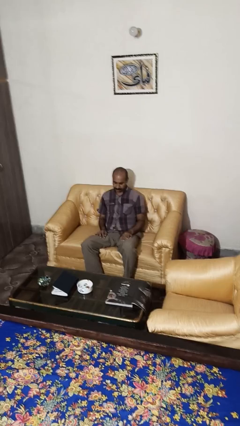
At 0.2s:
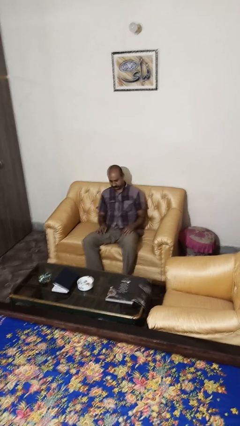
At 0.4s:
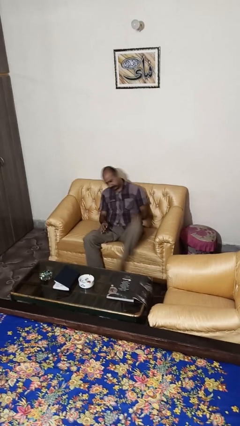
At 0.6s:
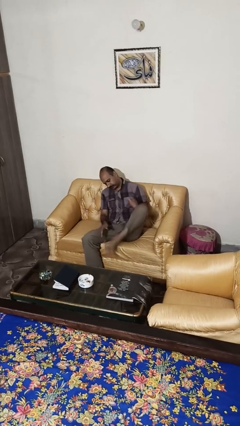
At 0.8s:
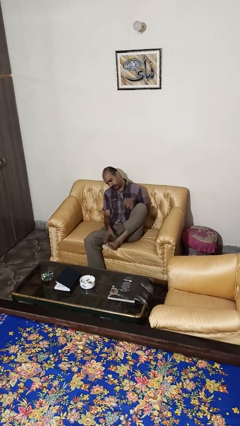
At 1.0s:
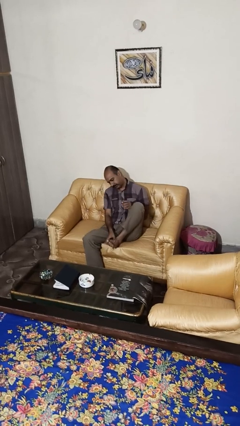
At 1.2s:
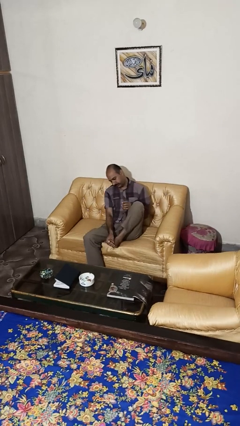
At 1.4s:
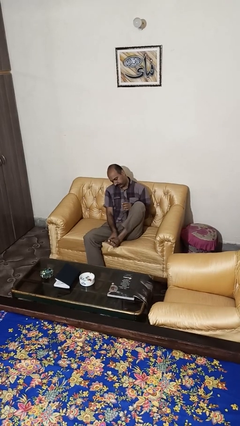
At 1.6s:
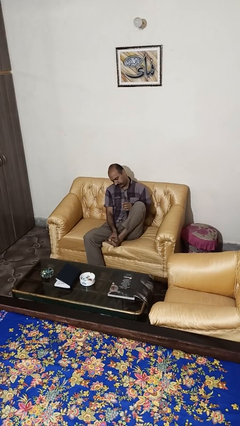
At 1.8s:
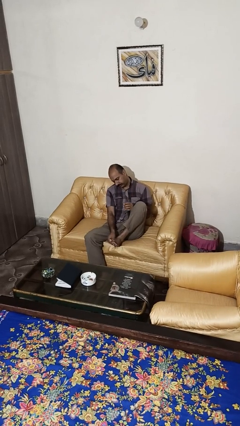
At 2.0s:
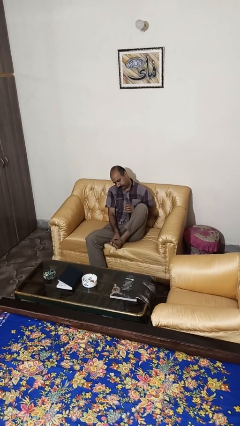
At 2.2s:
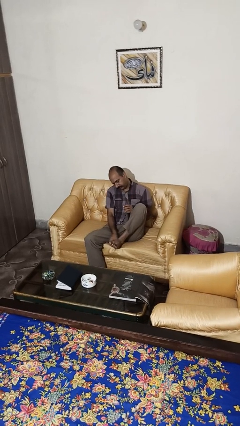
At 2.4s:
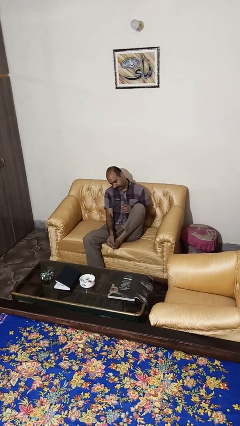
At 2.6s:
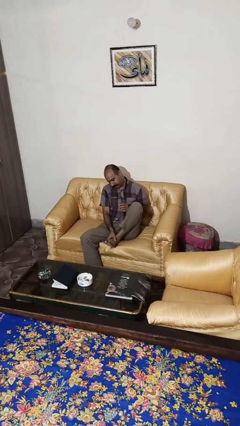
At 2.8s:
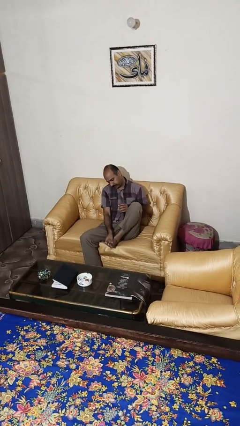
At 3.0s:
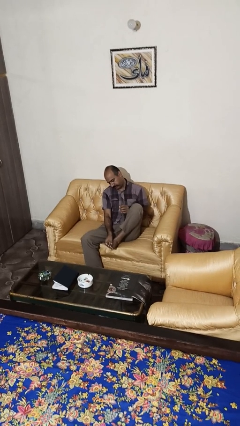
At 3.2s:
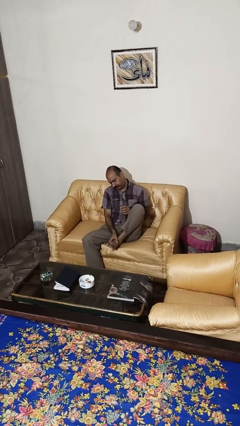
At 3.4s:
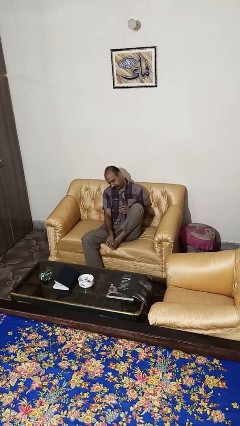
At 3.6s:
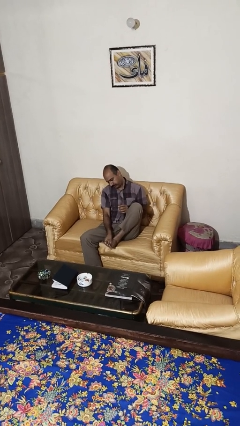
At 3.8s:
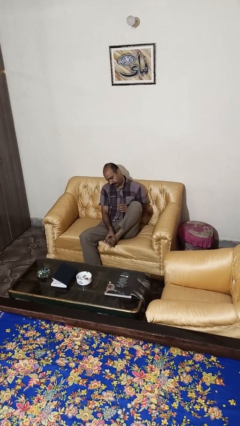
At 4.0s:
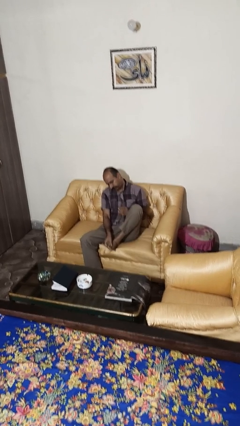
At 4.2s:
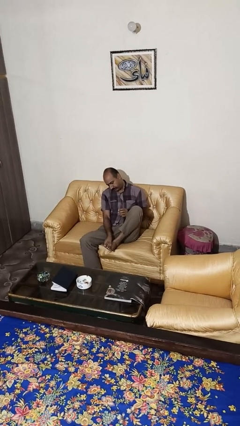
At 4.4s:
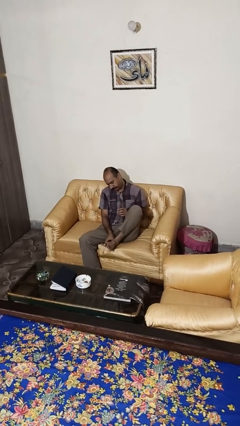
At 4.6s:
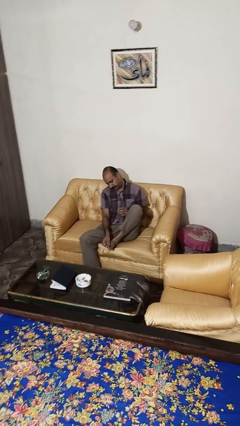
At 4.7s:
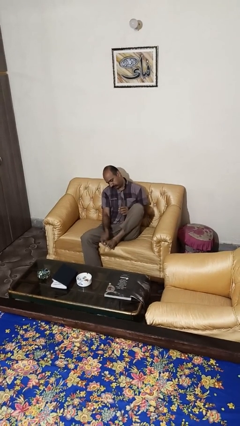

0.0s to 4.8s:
person rubs foot

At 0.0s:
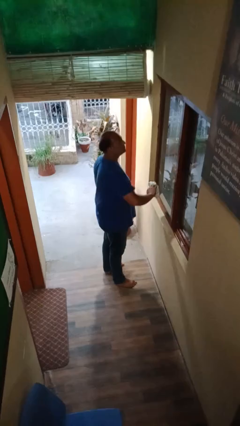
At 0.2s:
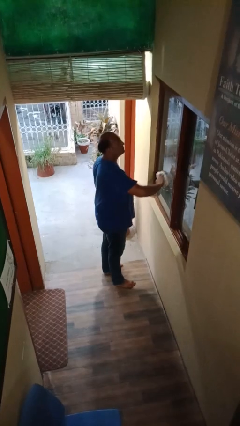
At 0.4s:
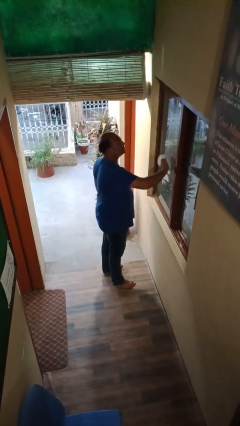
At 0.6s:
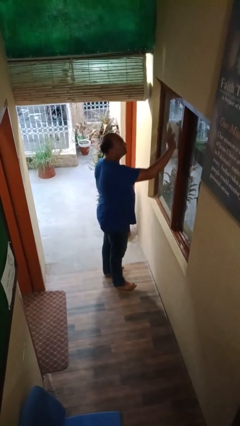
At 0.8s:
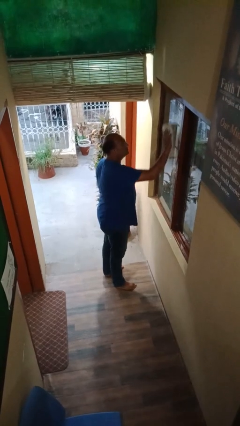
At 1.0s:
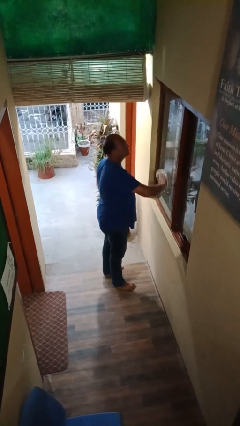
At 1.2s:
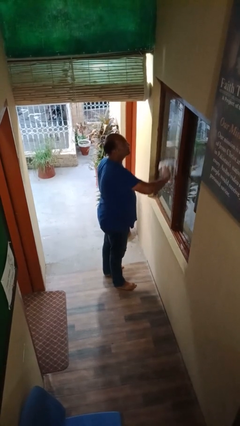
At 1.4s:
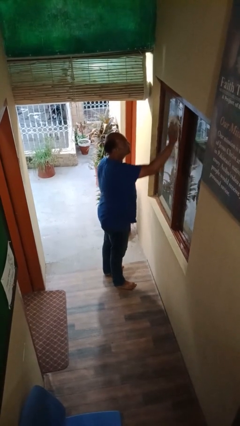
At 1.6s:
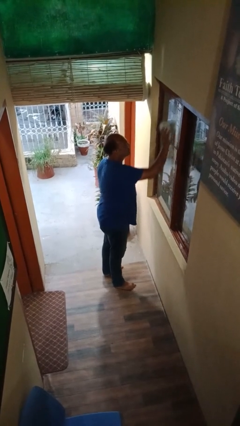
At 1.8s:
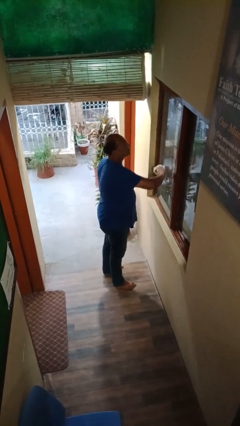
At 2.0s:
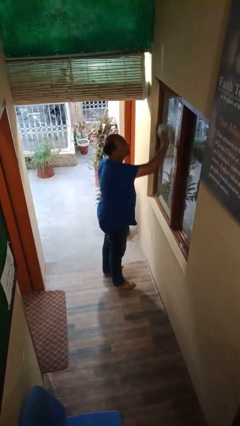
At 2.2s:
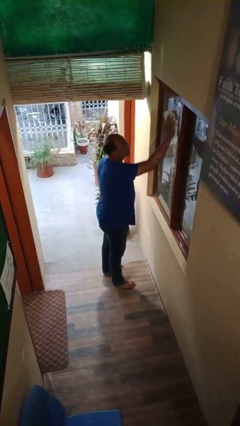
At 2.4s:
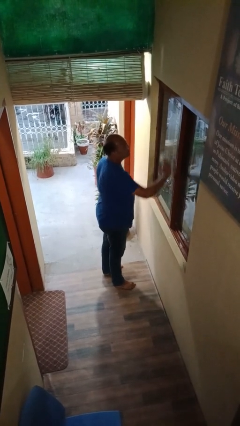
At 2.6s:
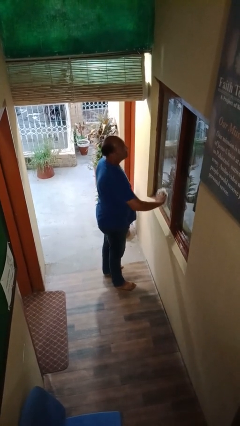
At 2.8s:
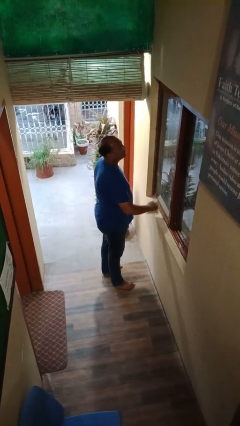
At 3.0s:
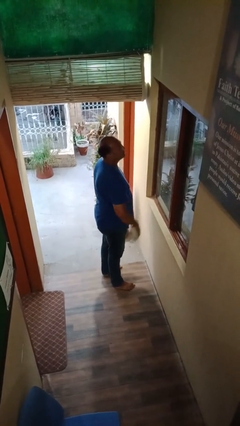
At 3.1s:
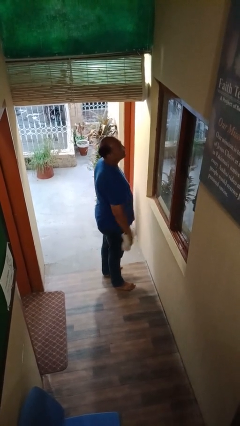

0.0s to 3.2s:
person washes window

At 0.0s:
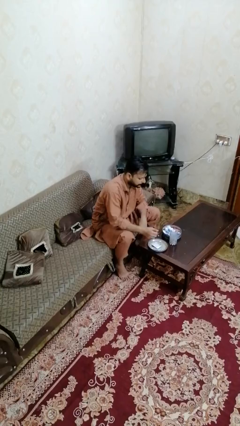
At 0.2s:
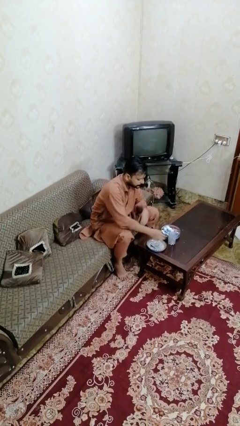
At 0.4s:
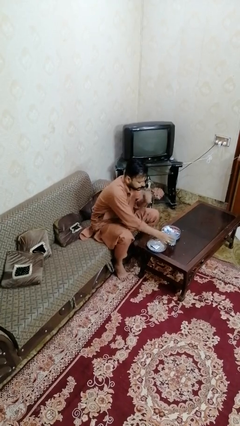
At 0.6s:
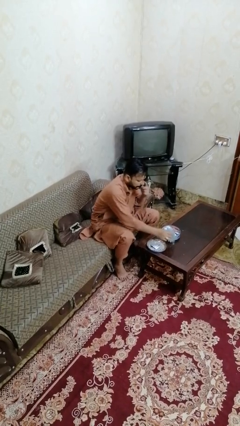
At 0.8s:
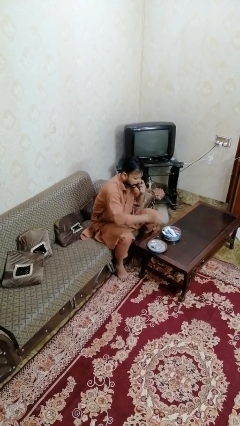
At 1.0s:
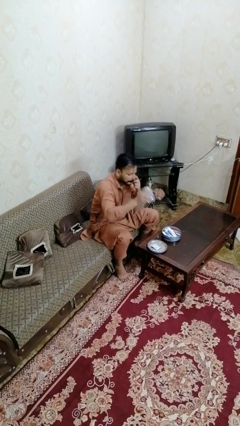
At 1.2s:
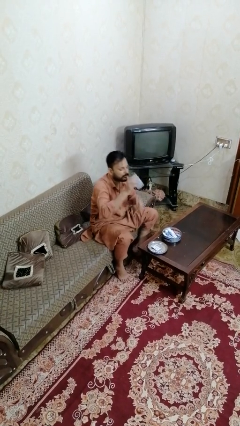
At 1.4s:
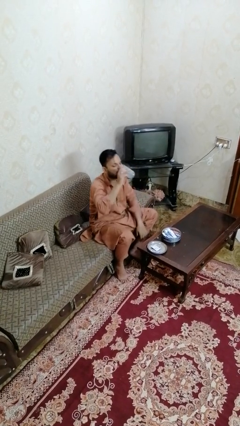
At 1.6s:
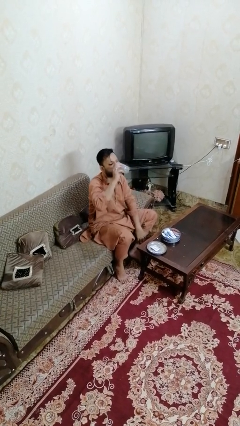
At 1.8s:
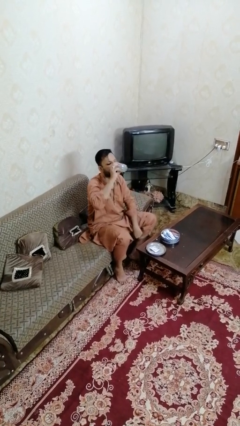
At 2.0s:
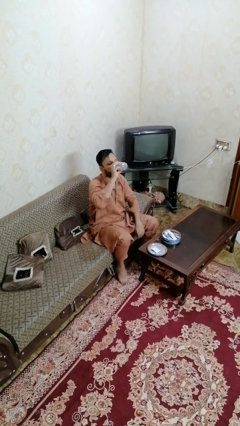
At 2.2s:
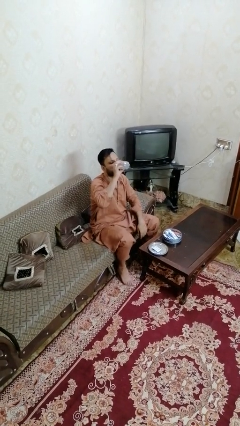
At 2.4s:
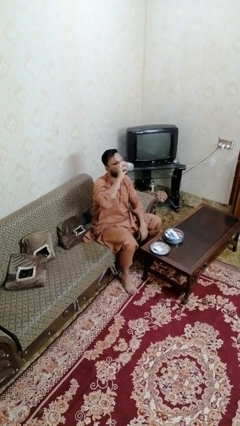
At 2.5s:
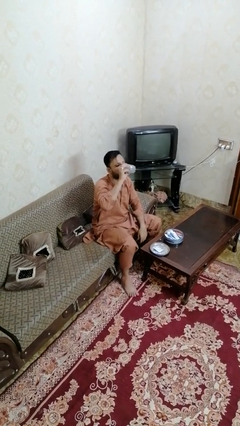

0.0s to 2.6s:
person drinks from cup

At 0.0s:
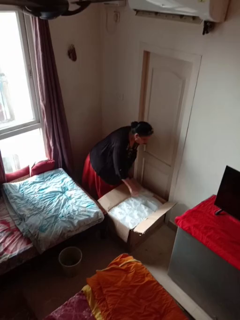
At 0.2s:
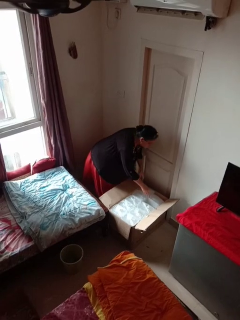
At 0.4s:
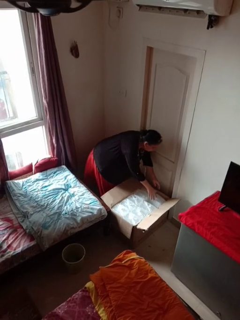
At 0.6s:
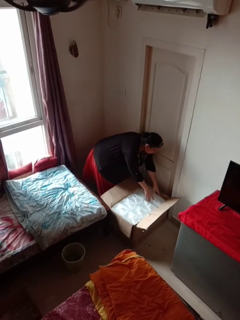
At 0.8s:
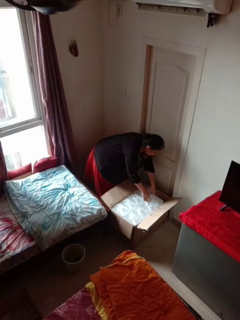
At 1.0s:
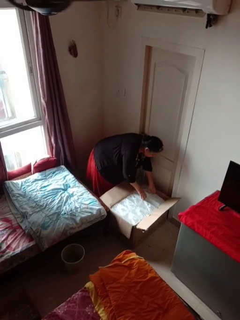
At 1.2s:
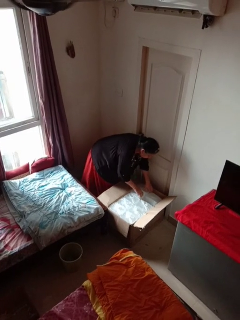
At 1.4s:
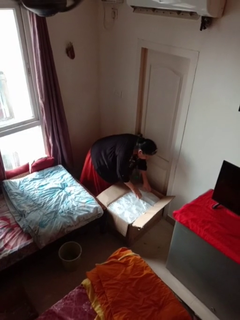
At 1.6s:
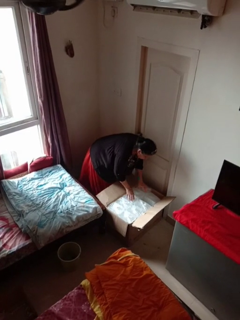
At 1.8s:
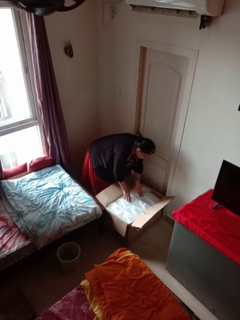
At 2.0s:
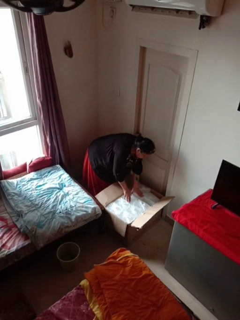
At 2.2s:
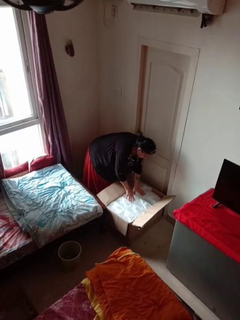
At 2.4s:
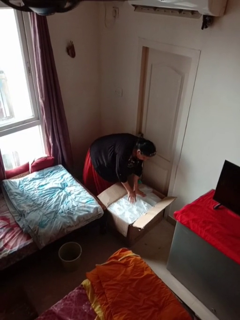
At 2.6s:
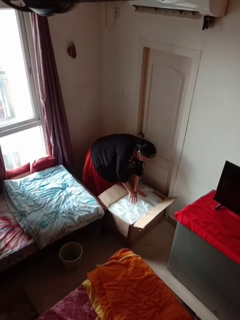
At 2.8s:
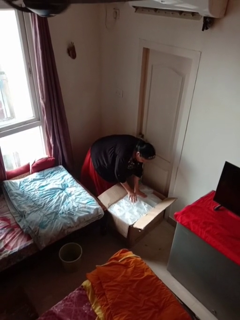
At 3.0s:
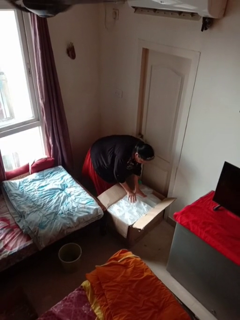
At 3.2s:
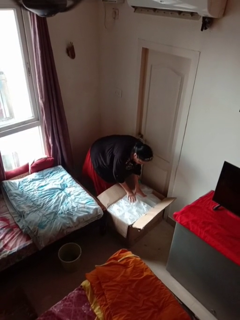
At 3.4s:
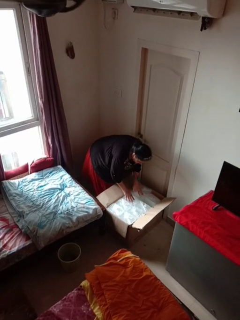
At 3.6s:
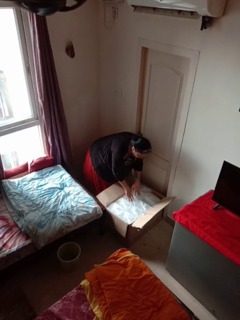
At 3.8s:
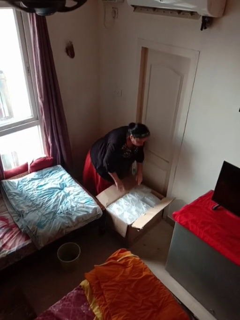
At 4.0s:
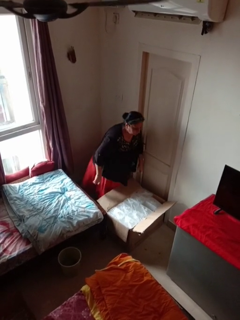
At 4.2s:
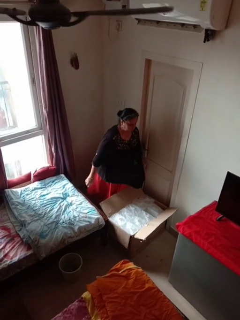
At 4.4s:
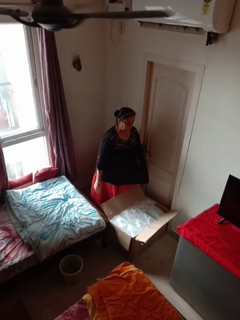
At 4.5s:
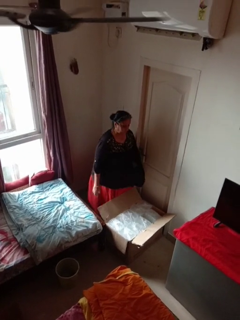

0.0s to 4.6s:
person searches in box

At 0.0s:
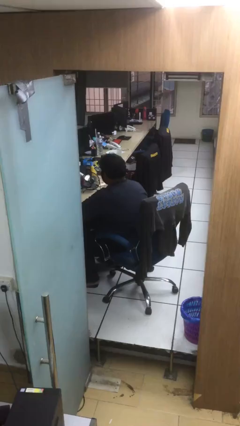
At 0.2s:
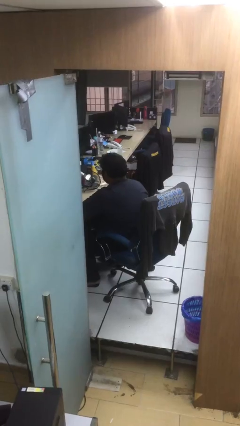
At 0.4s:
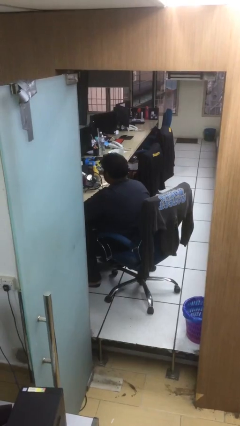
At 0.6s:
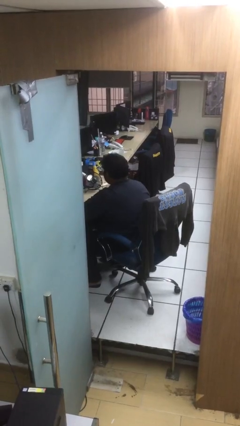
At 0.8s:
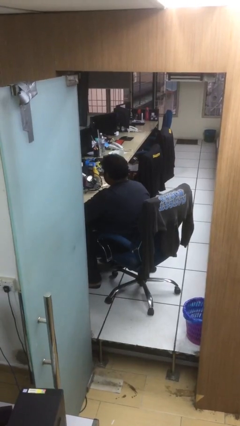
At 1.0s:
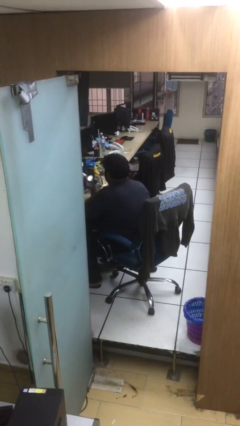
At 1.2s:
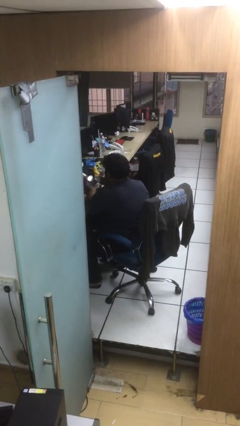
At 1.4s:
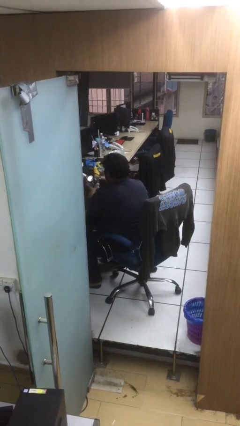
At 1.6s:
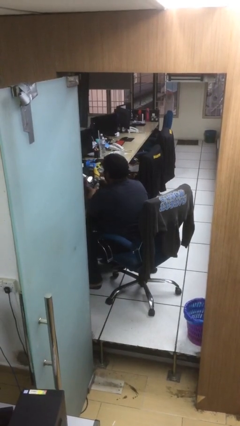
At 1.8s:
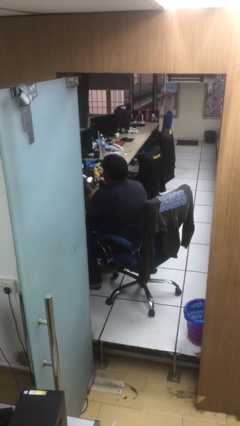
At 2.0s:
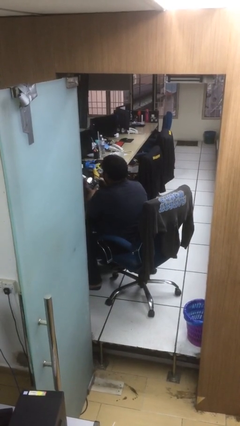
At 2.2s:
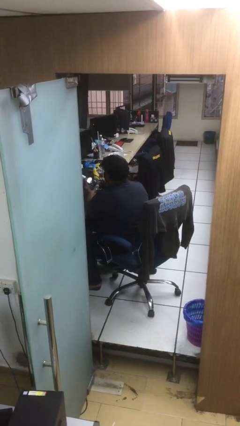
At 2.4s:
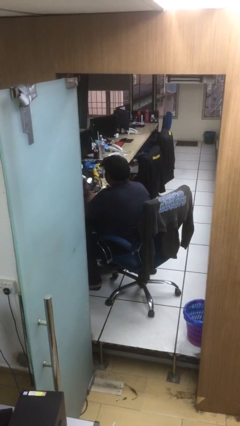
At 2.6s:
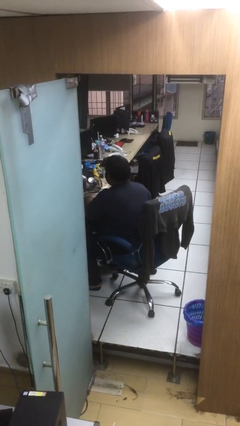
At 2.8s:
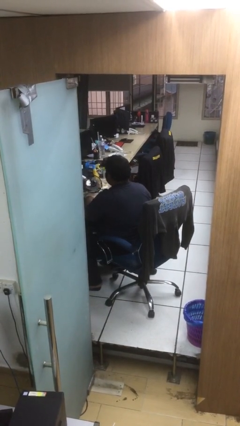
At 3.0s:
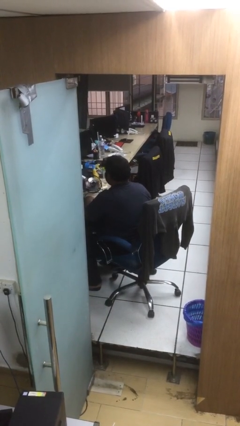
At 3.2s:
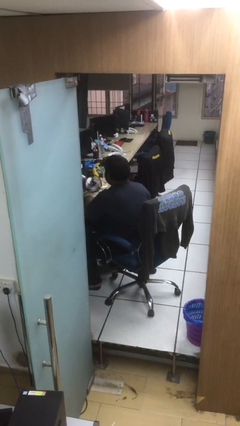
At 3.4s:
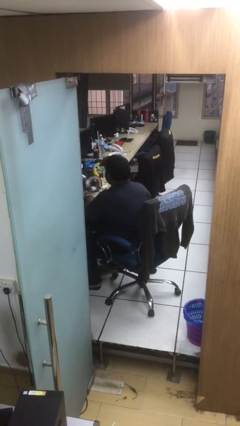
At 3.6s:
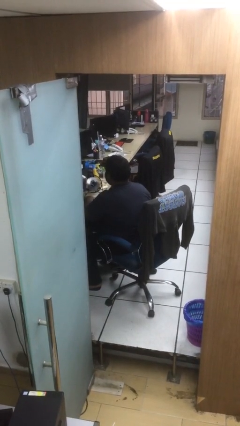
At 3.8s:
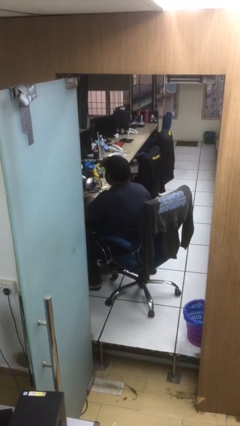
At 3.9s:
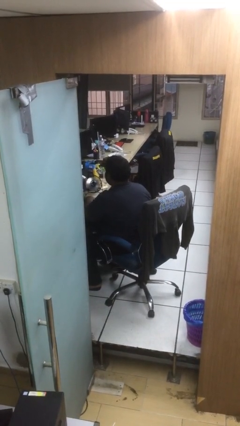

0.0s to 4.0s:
person turns on fan
